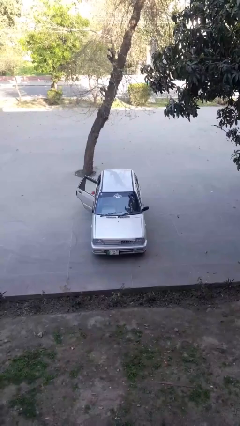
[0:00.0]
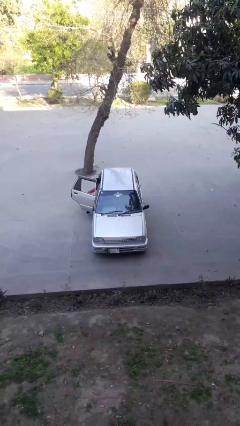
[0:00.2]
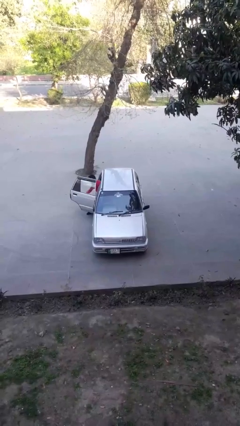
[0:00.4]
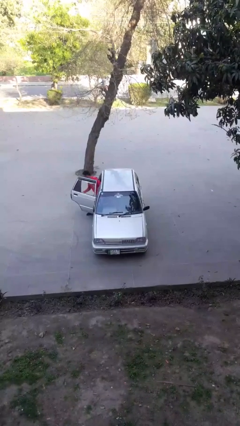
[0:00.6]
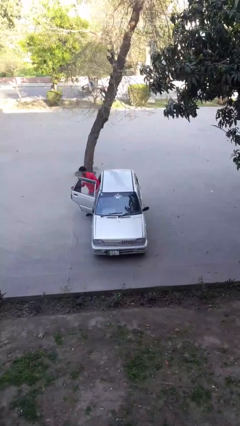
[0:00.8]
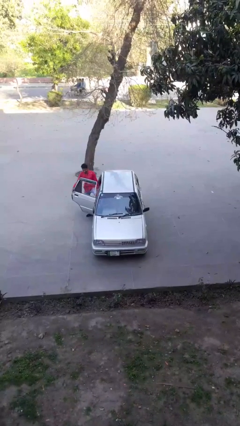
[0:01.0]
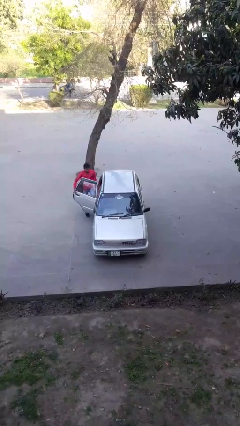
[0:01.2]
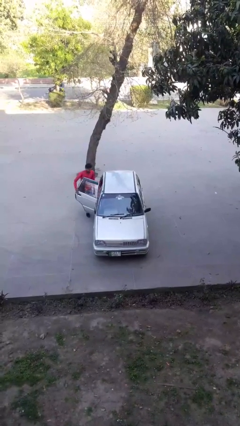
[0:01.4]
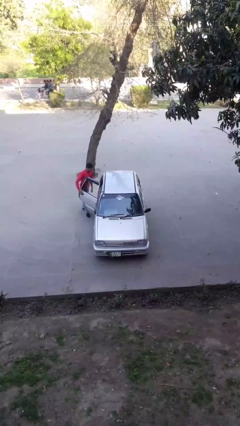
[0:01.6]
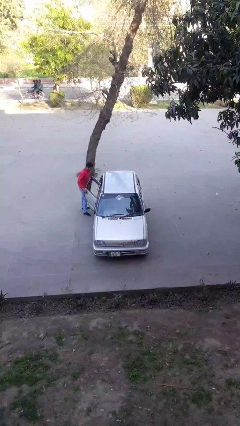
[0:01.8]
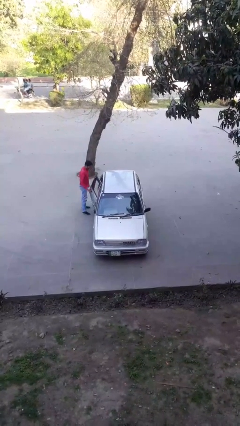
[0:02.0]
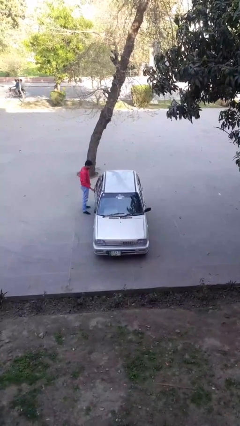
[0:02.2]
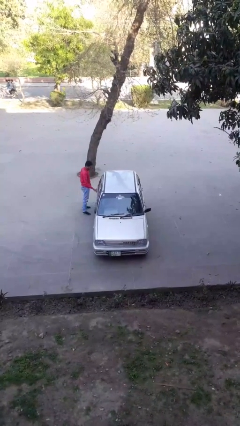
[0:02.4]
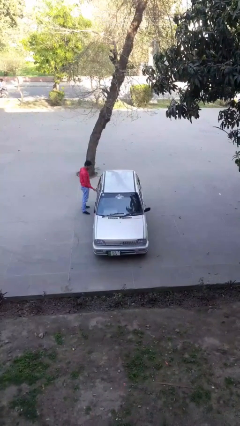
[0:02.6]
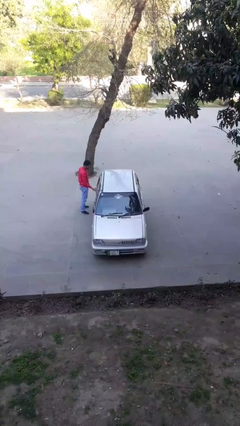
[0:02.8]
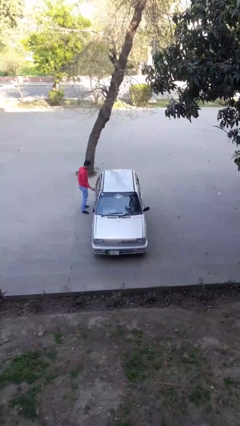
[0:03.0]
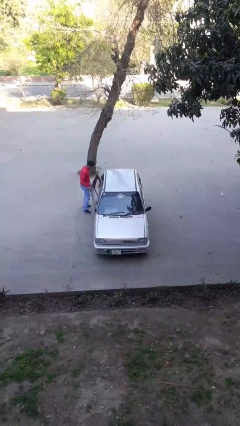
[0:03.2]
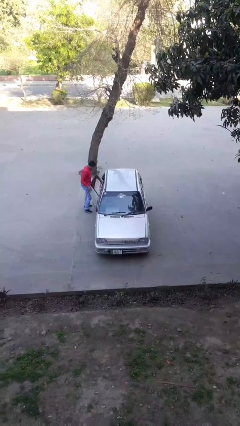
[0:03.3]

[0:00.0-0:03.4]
car drops off person

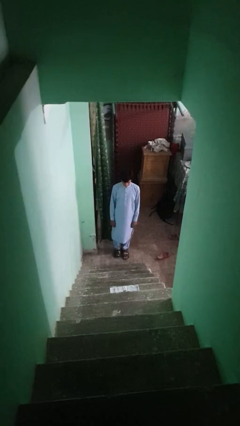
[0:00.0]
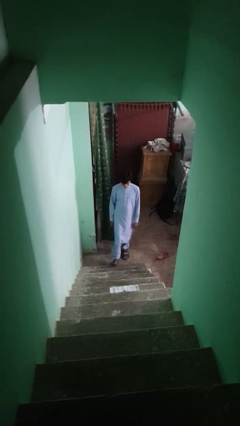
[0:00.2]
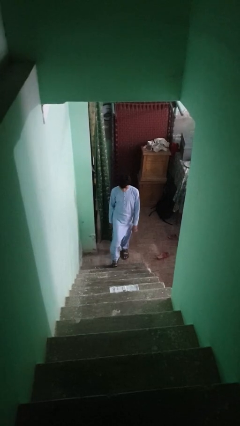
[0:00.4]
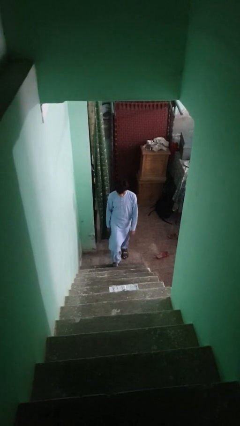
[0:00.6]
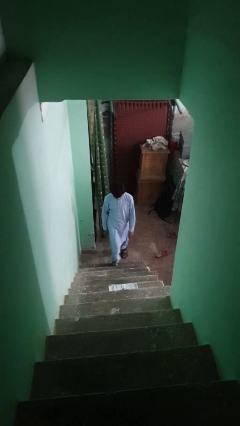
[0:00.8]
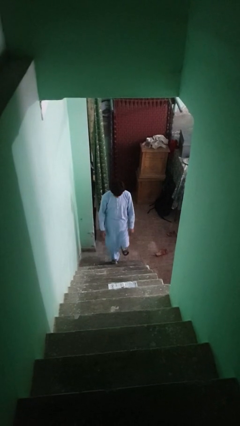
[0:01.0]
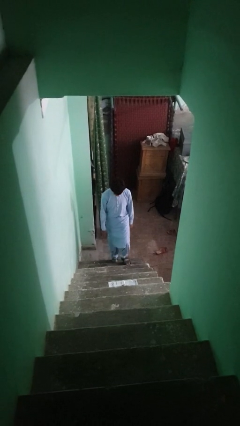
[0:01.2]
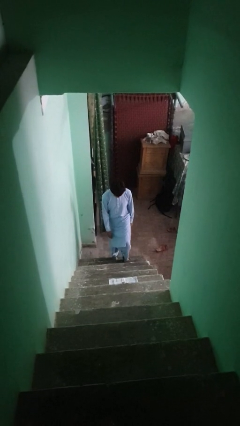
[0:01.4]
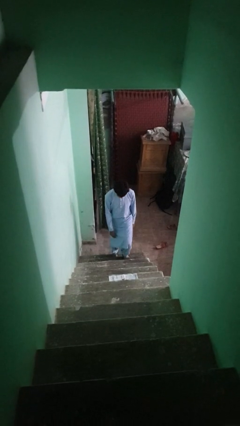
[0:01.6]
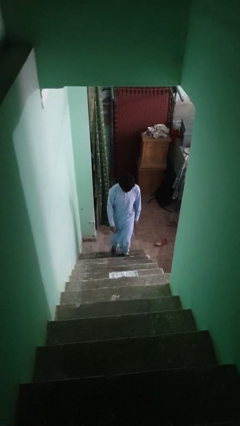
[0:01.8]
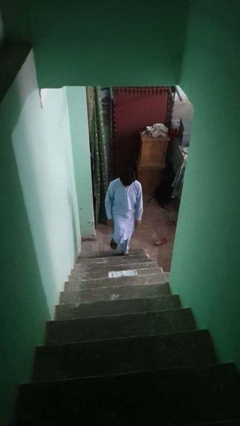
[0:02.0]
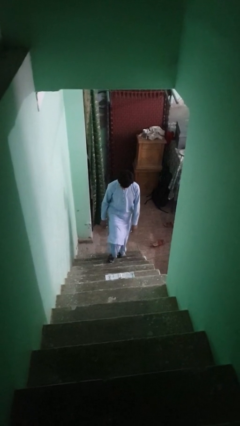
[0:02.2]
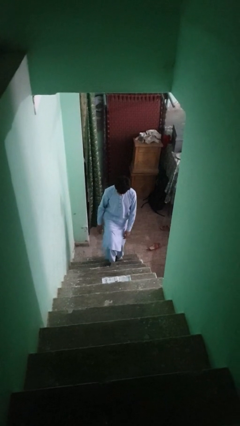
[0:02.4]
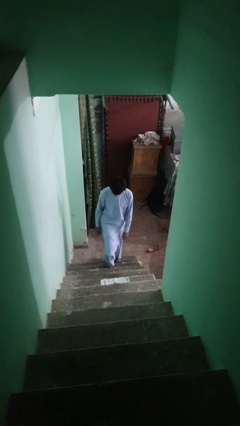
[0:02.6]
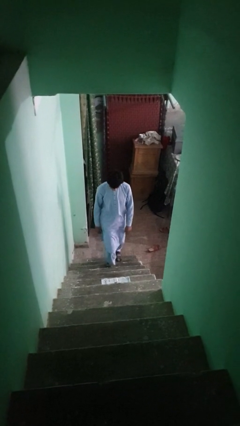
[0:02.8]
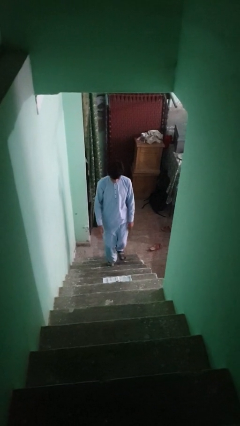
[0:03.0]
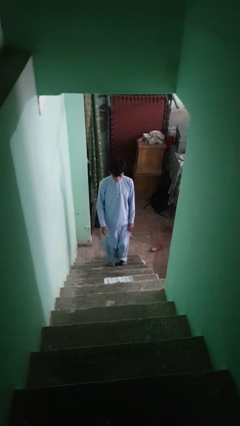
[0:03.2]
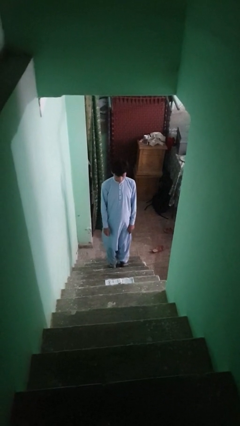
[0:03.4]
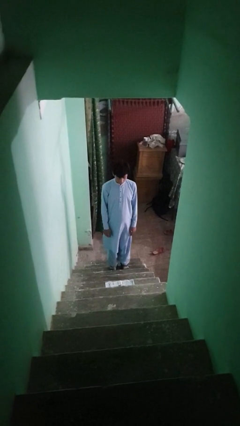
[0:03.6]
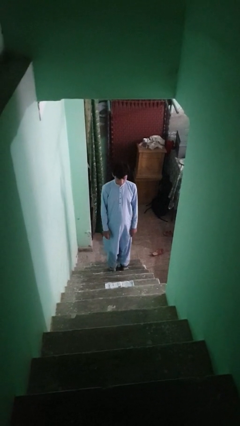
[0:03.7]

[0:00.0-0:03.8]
person climbs up stairs

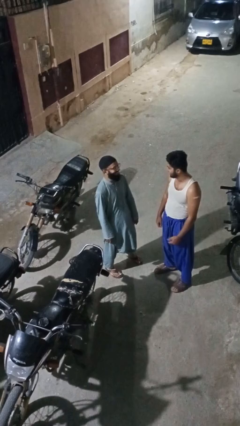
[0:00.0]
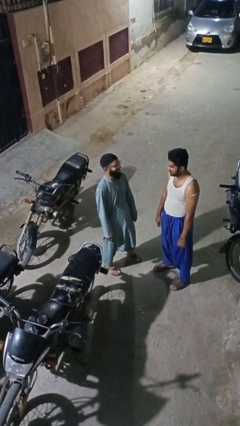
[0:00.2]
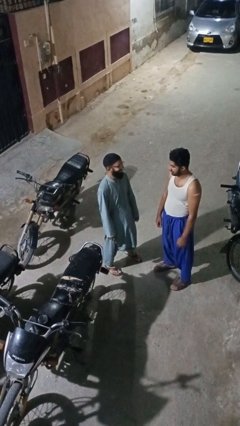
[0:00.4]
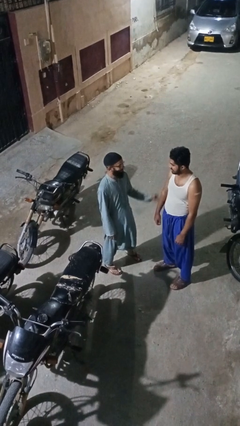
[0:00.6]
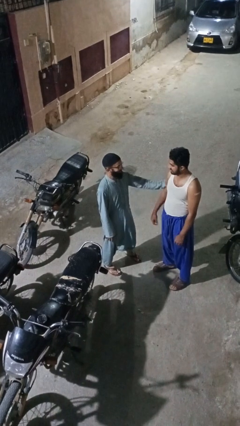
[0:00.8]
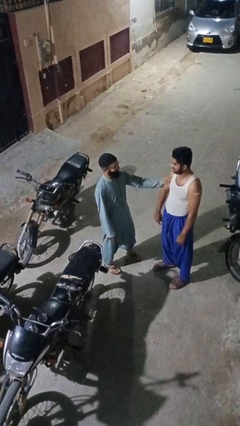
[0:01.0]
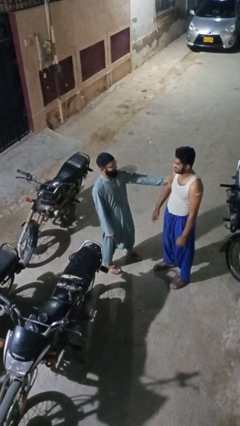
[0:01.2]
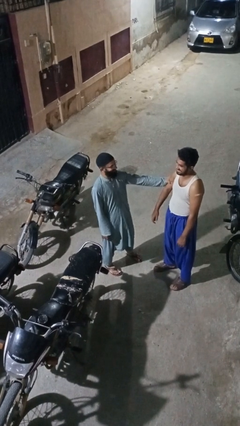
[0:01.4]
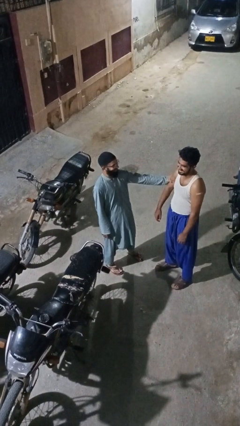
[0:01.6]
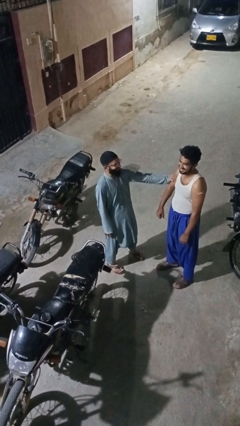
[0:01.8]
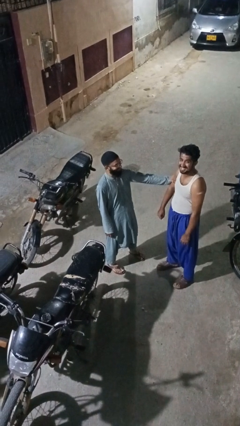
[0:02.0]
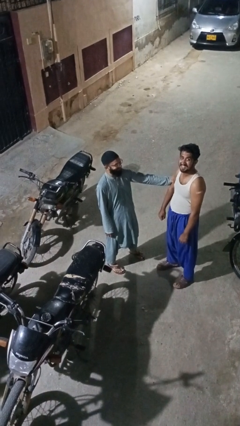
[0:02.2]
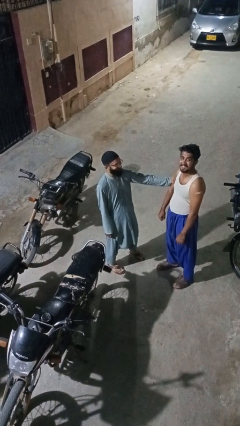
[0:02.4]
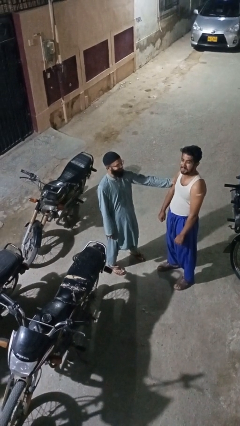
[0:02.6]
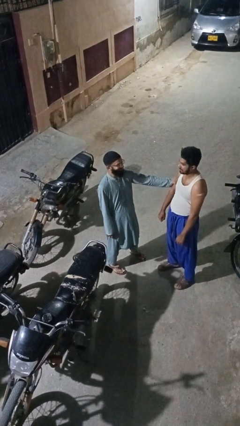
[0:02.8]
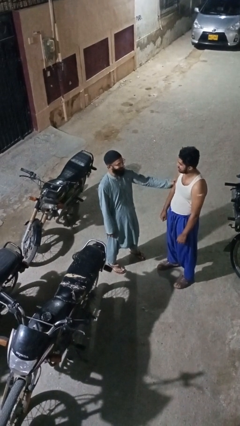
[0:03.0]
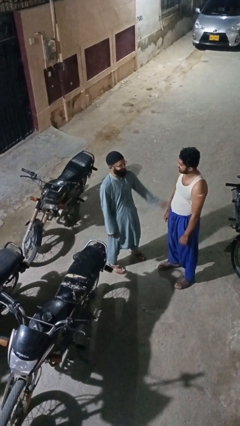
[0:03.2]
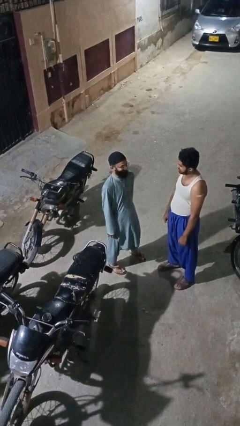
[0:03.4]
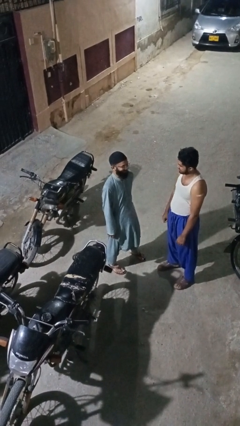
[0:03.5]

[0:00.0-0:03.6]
person grabs person by bicep

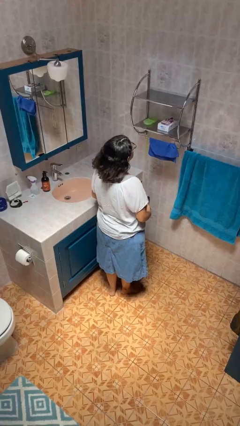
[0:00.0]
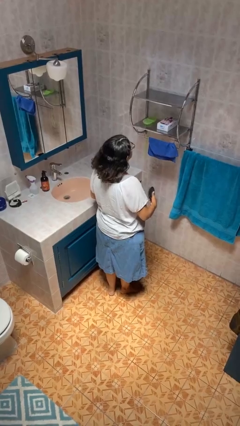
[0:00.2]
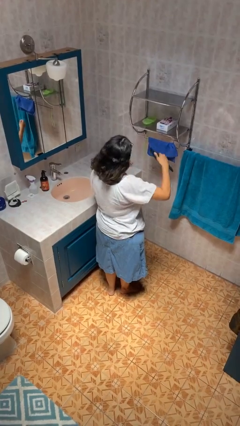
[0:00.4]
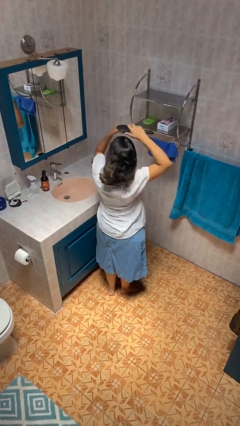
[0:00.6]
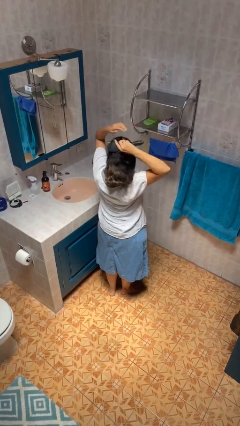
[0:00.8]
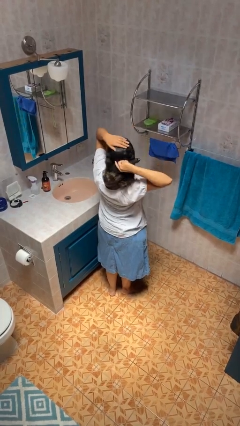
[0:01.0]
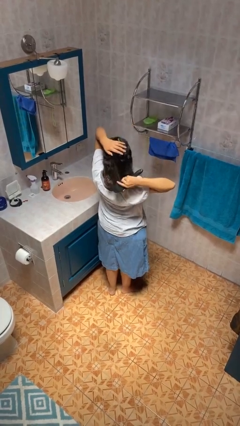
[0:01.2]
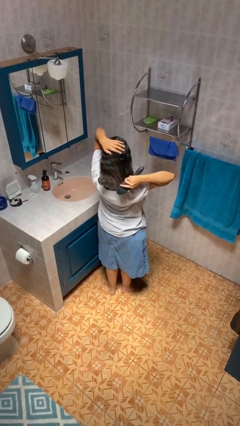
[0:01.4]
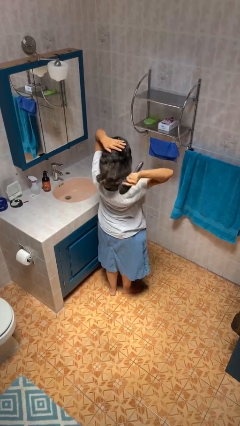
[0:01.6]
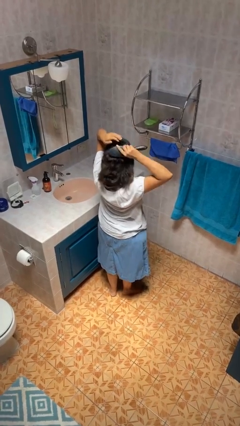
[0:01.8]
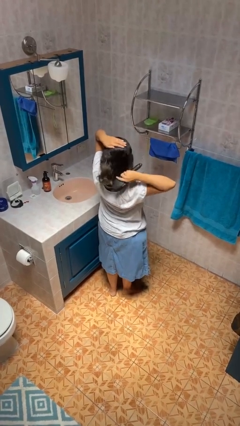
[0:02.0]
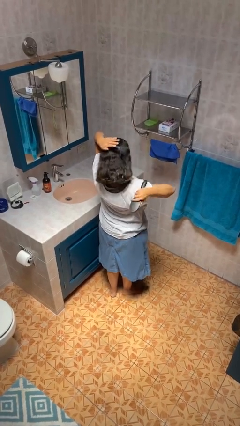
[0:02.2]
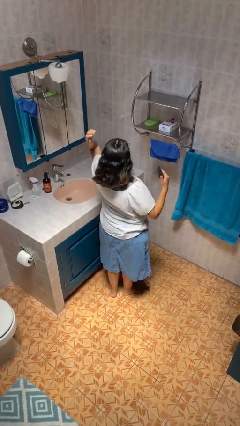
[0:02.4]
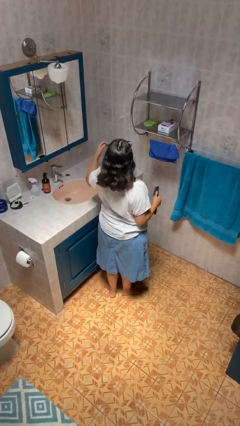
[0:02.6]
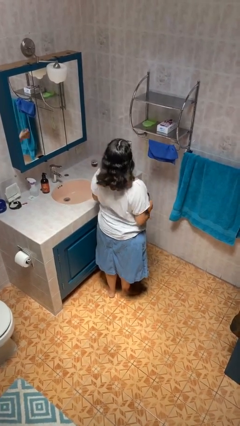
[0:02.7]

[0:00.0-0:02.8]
person brushes hair

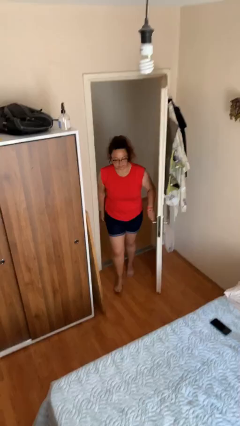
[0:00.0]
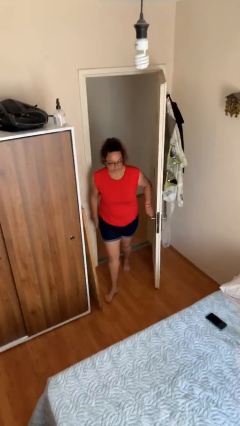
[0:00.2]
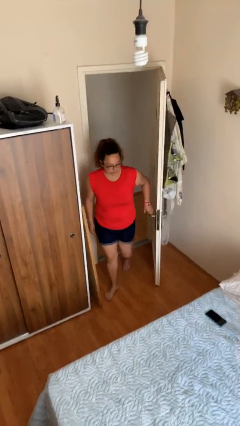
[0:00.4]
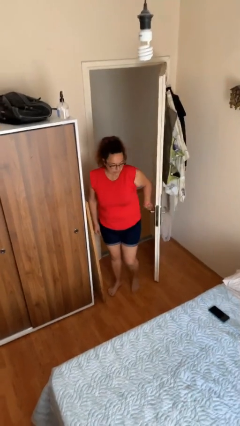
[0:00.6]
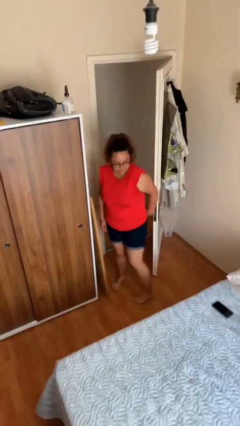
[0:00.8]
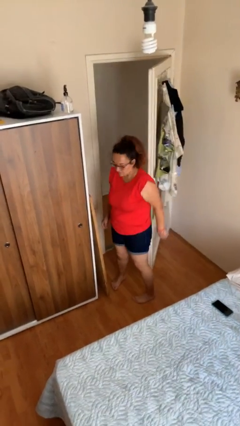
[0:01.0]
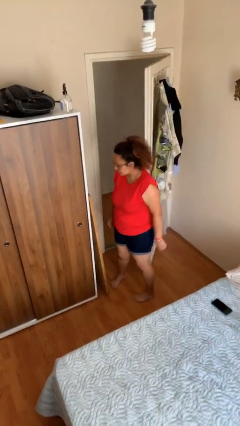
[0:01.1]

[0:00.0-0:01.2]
person enters scene through structure

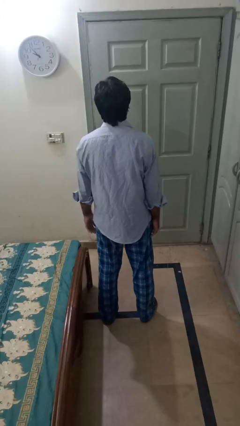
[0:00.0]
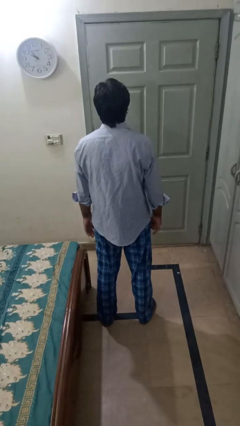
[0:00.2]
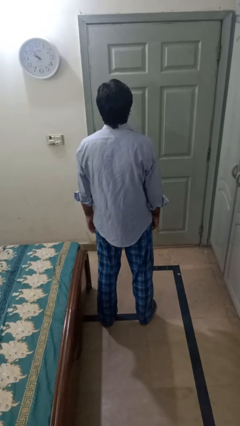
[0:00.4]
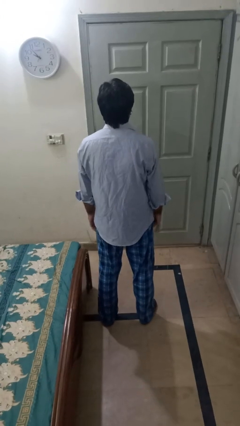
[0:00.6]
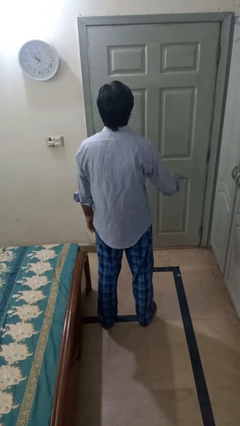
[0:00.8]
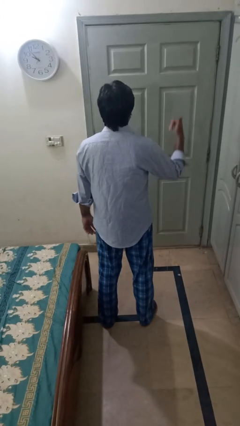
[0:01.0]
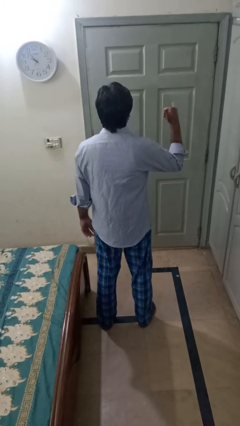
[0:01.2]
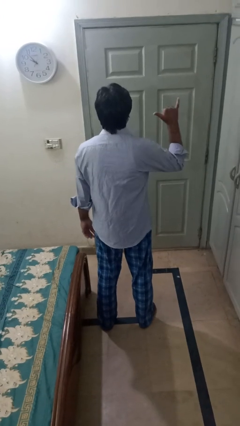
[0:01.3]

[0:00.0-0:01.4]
person gestures hang loose

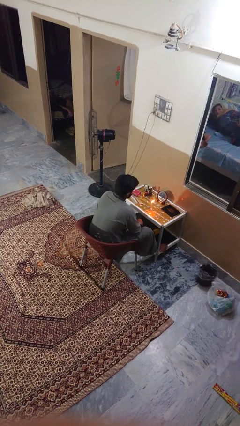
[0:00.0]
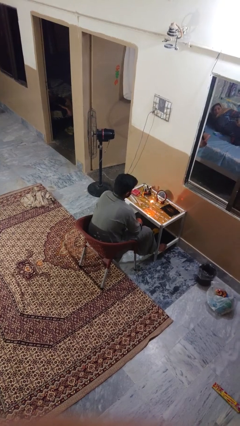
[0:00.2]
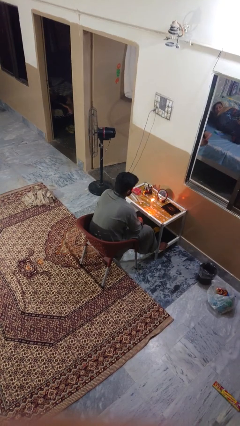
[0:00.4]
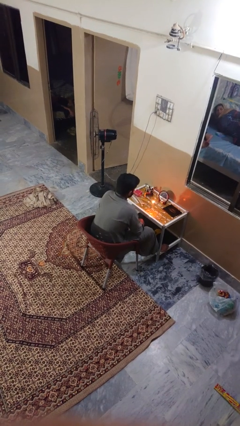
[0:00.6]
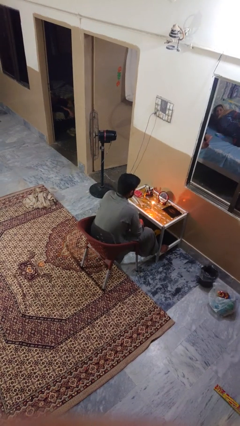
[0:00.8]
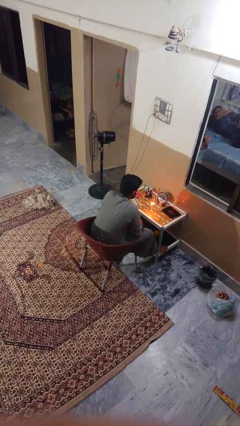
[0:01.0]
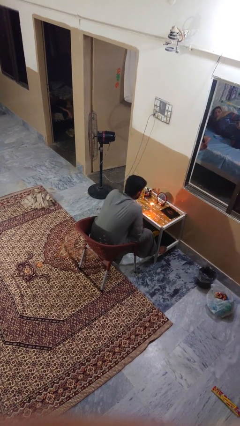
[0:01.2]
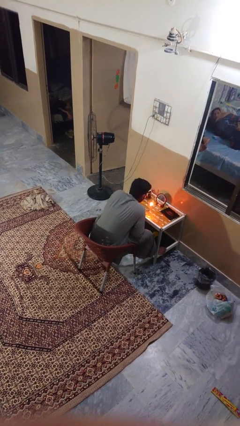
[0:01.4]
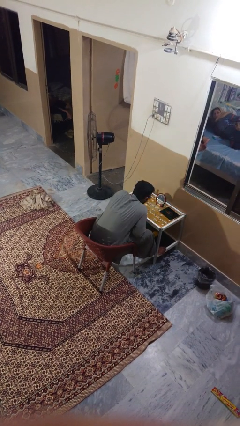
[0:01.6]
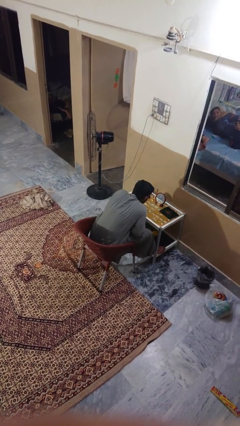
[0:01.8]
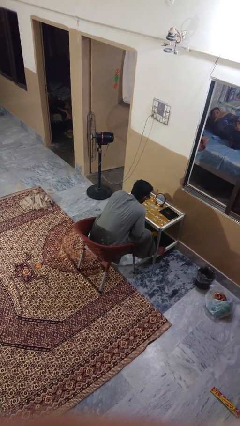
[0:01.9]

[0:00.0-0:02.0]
person extinguishes candle
